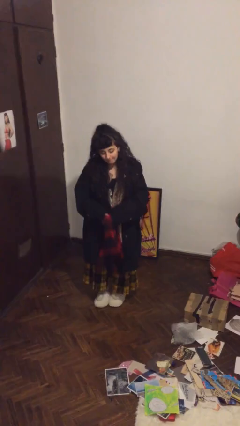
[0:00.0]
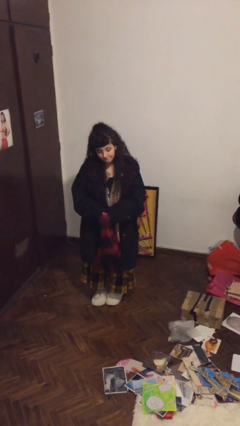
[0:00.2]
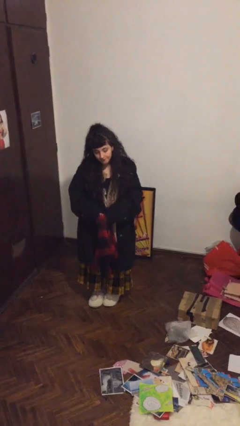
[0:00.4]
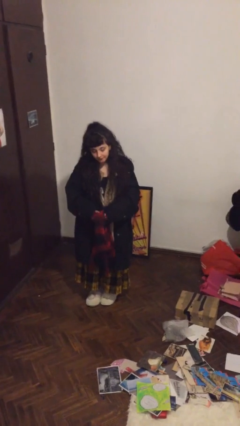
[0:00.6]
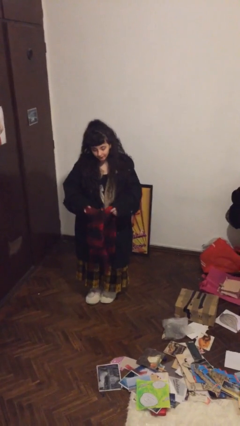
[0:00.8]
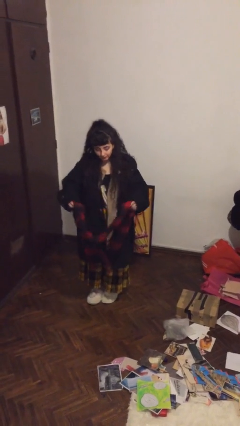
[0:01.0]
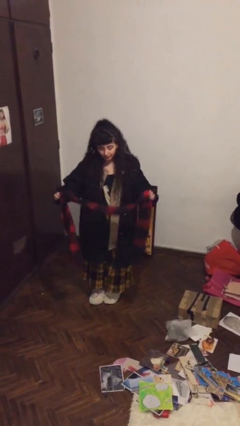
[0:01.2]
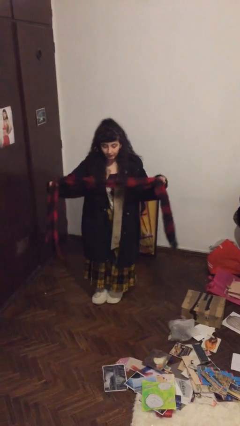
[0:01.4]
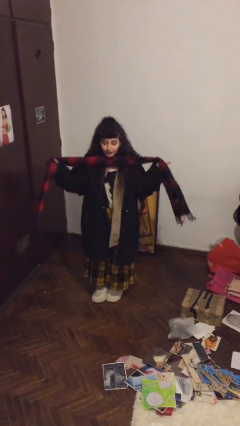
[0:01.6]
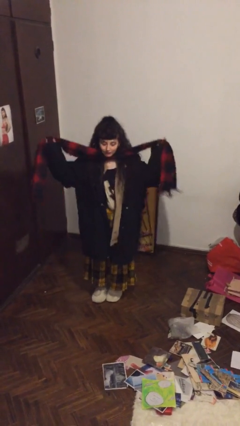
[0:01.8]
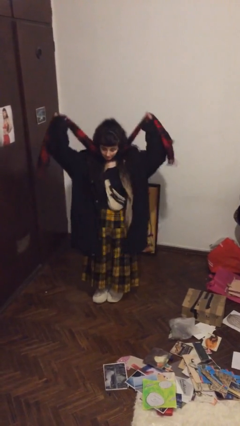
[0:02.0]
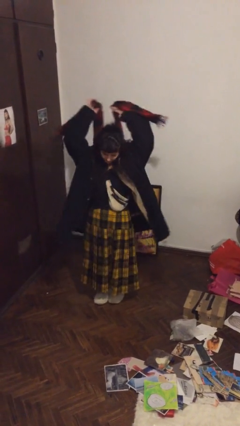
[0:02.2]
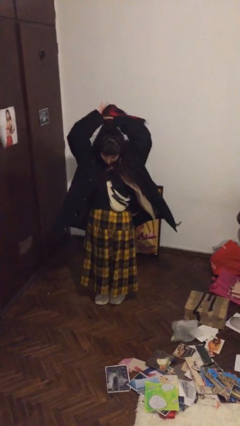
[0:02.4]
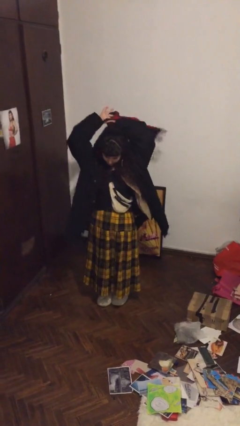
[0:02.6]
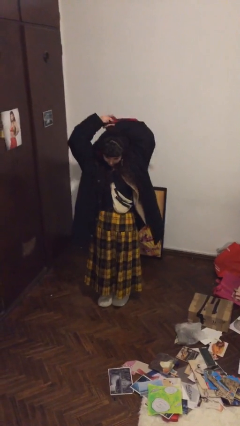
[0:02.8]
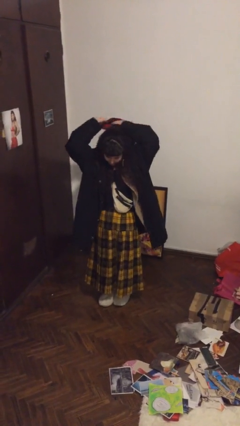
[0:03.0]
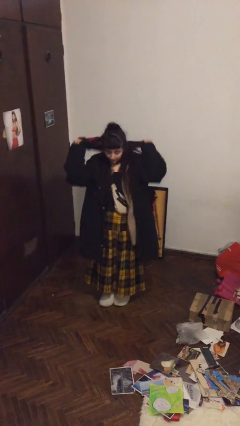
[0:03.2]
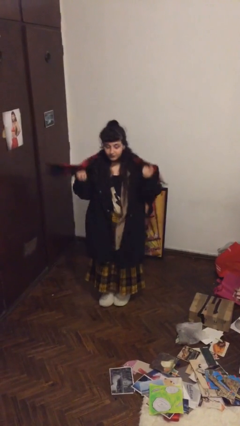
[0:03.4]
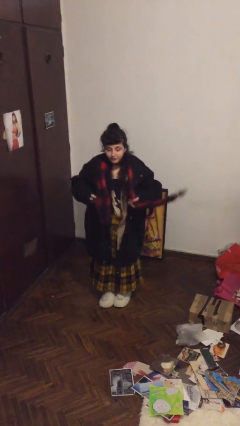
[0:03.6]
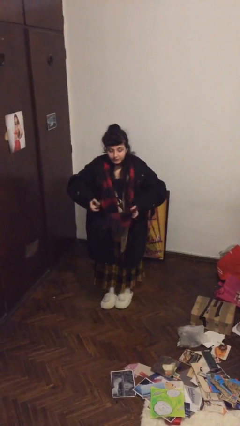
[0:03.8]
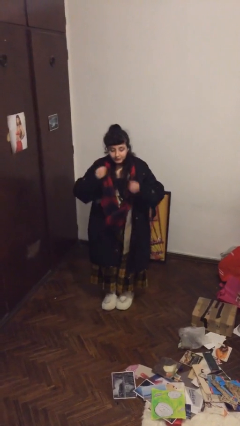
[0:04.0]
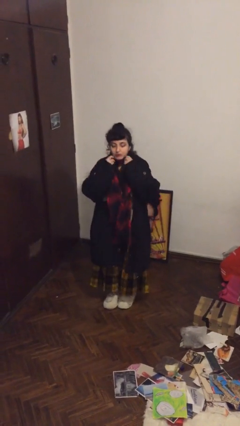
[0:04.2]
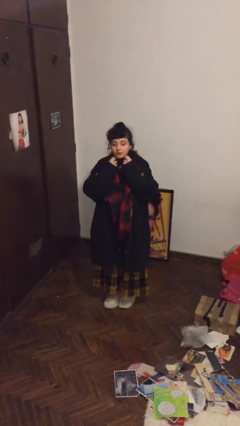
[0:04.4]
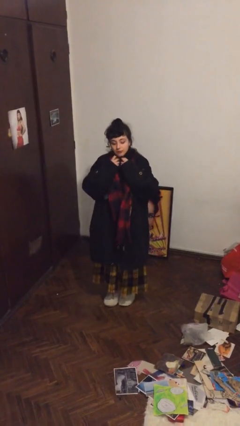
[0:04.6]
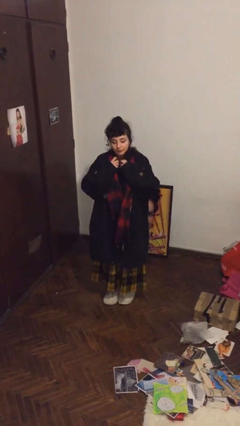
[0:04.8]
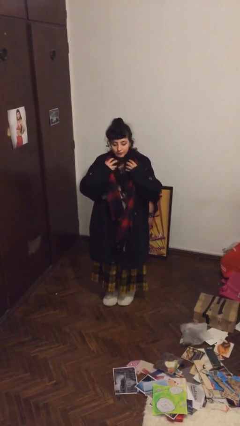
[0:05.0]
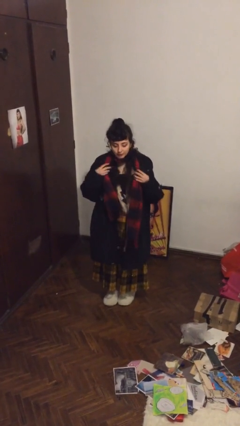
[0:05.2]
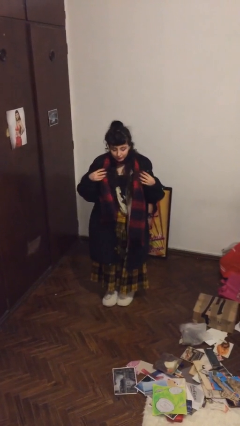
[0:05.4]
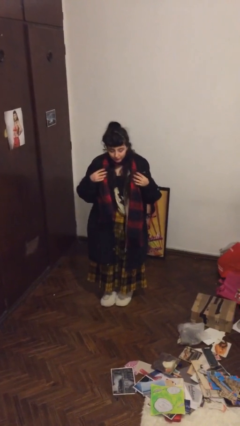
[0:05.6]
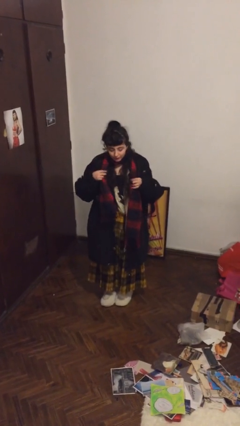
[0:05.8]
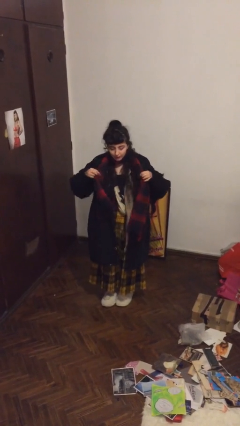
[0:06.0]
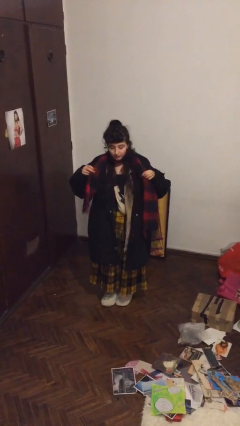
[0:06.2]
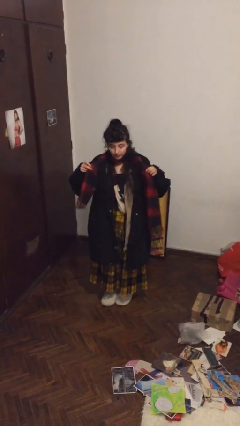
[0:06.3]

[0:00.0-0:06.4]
person puts on scarf

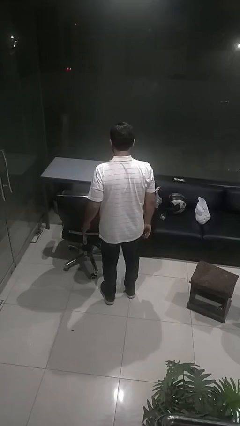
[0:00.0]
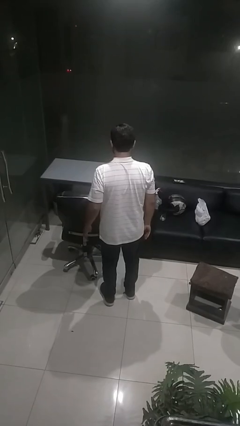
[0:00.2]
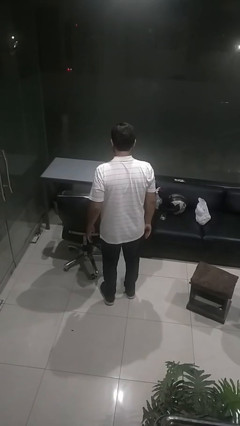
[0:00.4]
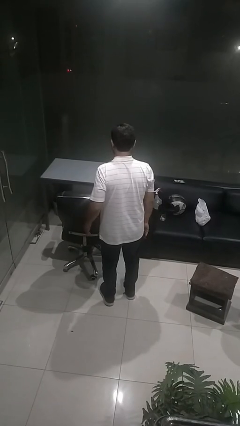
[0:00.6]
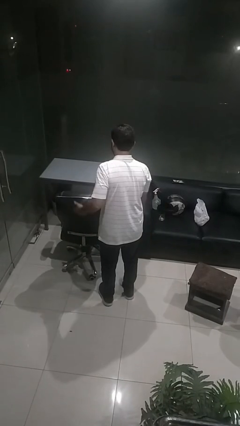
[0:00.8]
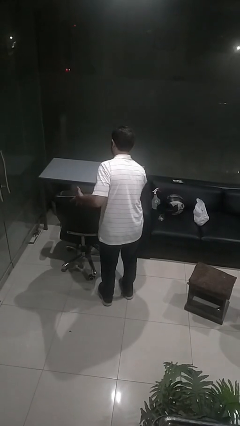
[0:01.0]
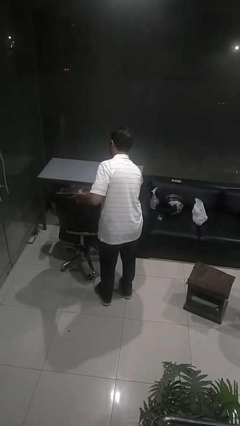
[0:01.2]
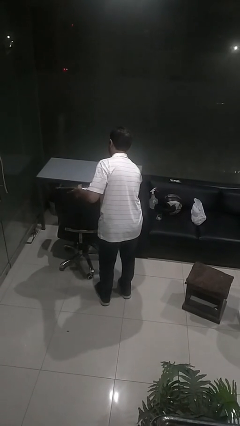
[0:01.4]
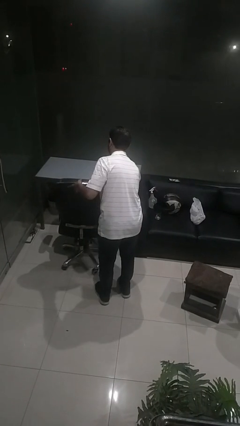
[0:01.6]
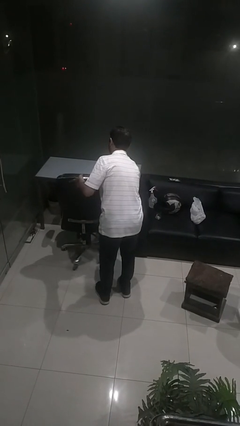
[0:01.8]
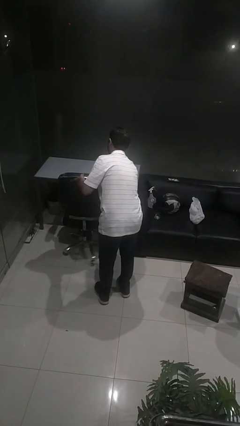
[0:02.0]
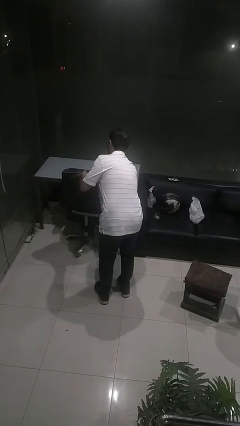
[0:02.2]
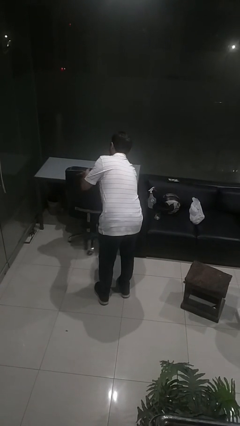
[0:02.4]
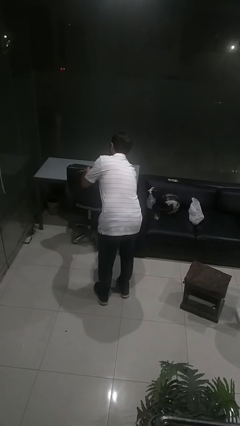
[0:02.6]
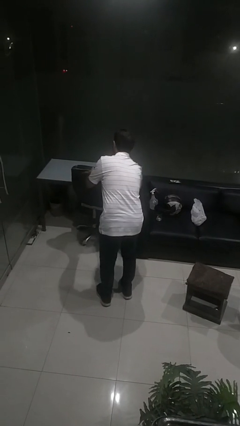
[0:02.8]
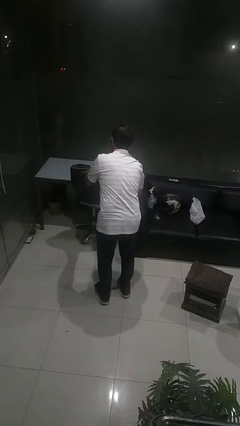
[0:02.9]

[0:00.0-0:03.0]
person pushes in chair

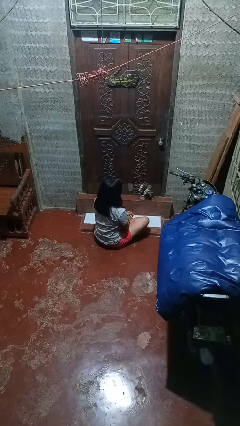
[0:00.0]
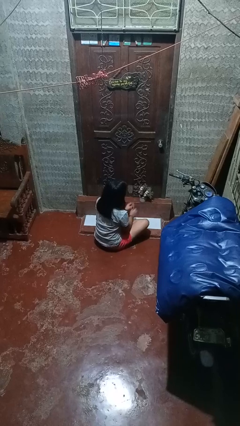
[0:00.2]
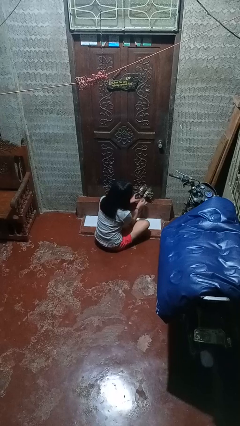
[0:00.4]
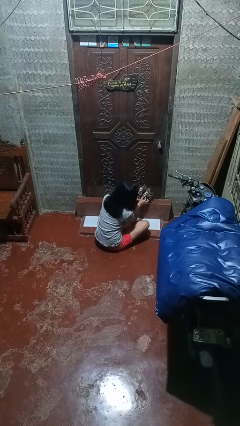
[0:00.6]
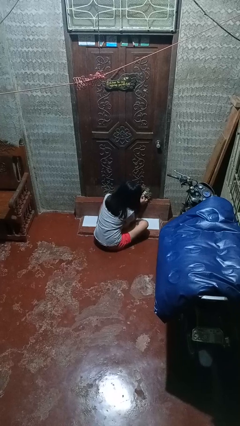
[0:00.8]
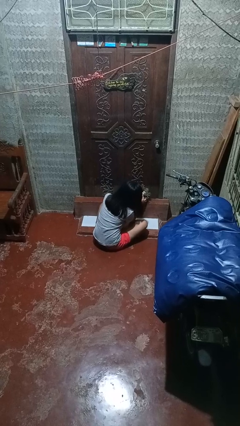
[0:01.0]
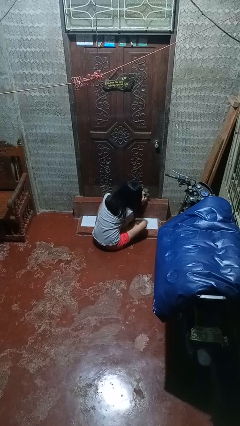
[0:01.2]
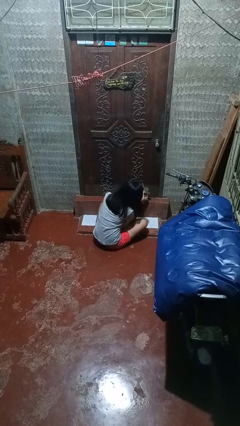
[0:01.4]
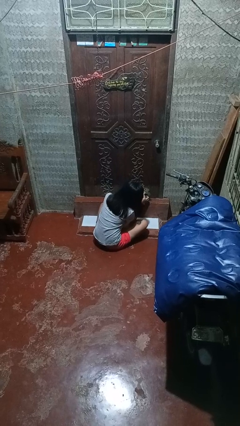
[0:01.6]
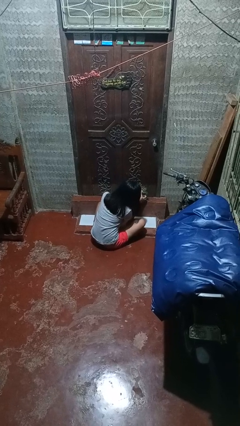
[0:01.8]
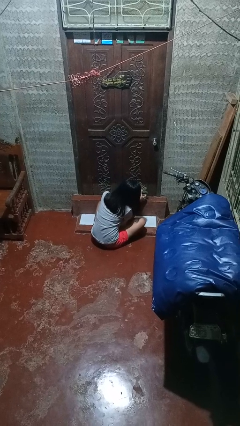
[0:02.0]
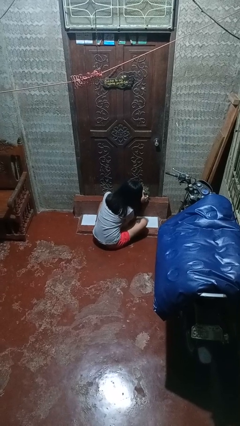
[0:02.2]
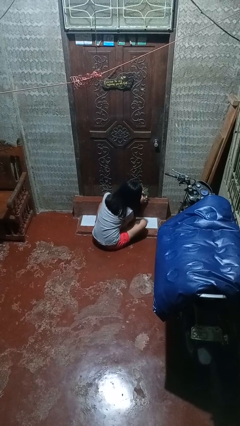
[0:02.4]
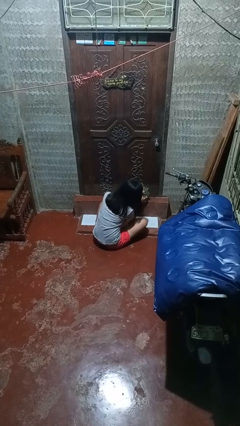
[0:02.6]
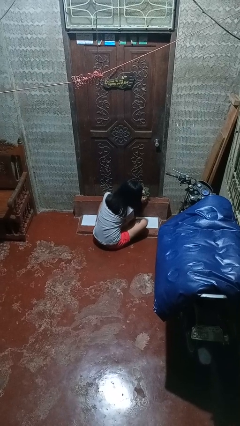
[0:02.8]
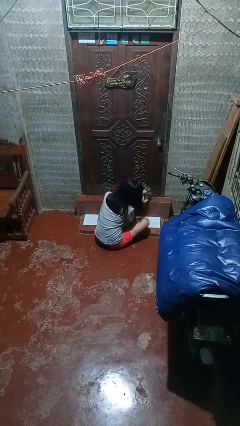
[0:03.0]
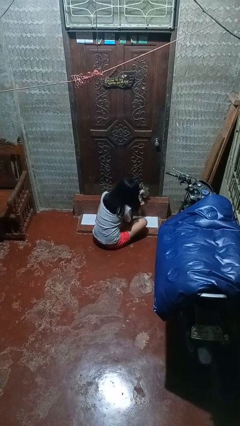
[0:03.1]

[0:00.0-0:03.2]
person arranges flowers in vase

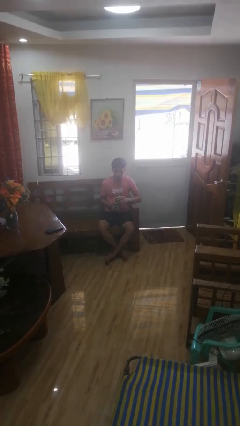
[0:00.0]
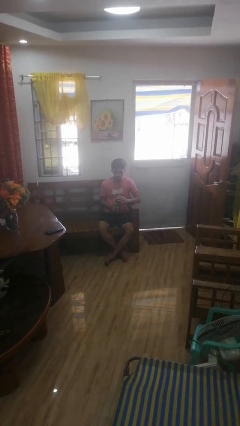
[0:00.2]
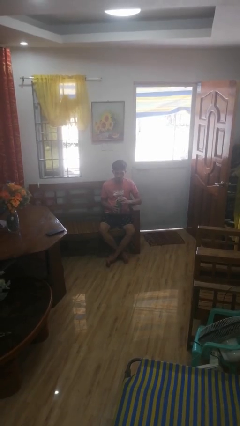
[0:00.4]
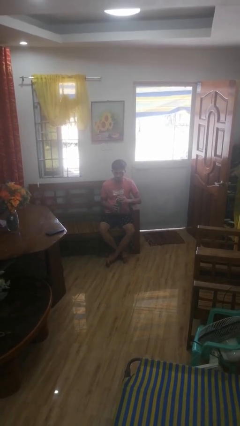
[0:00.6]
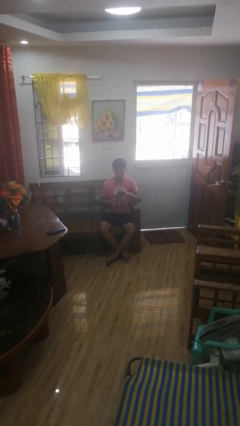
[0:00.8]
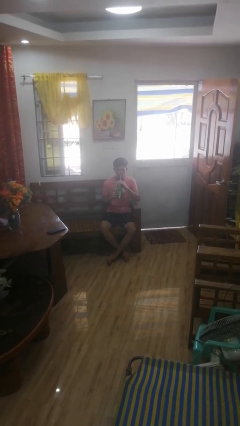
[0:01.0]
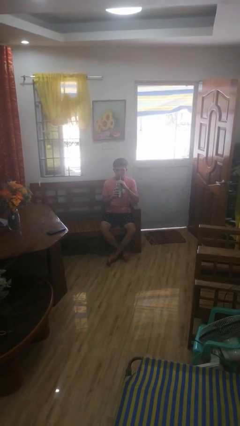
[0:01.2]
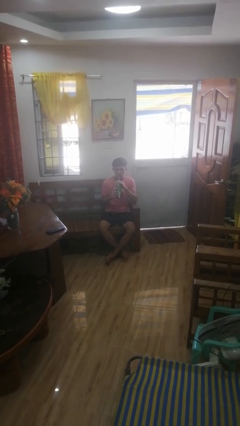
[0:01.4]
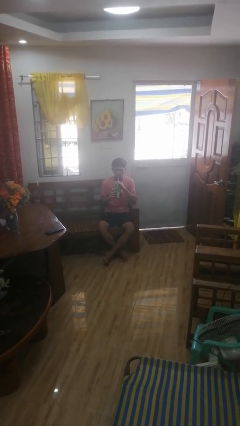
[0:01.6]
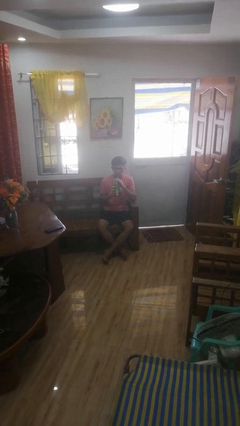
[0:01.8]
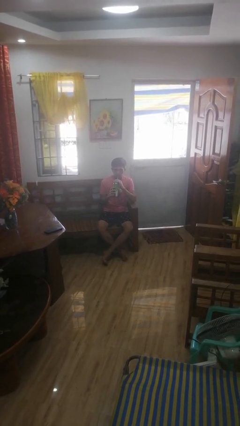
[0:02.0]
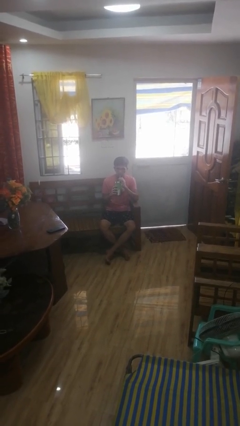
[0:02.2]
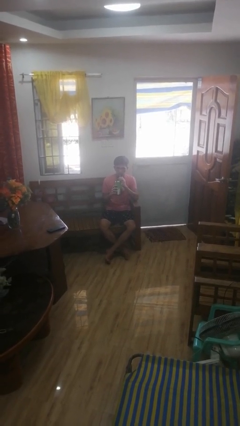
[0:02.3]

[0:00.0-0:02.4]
person drinks from straw

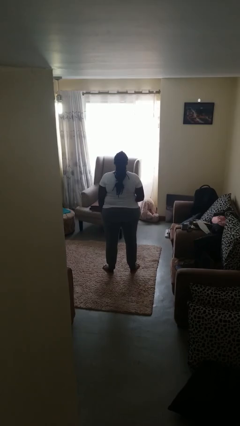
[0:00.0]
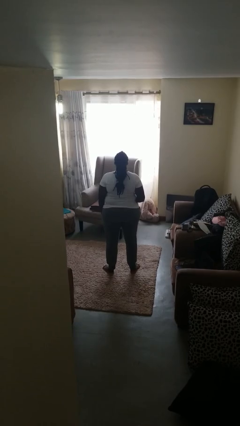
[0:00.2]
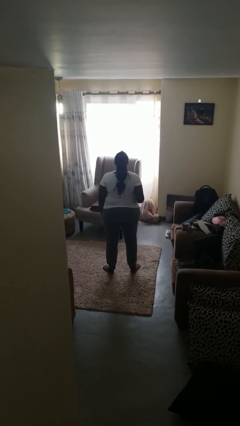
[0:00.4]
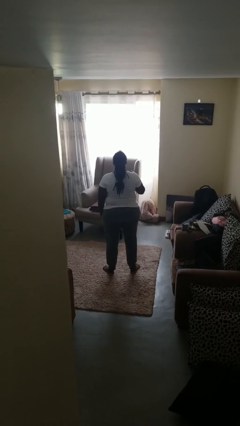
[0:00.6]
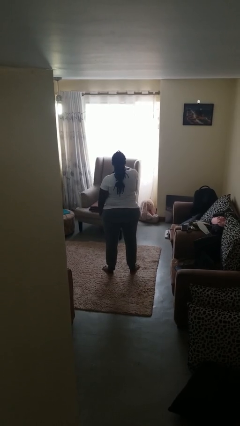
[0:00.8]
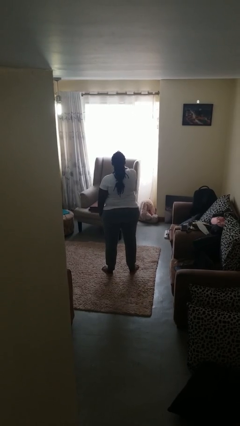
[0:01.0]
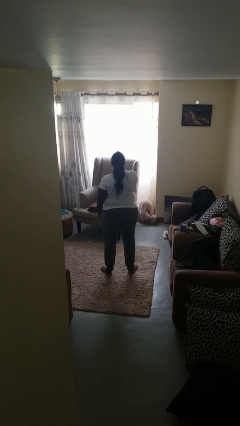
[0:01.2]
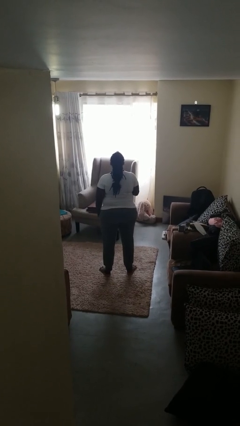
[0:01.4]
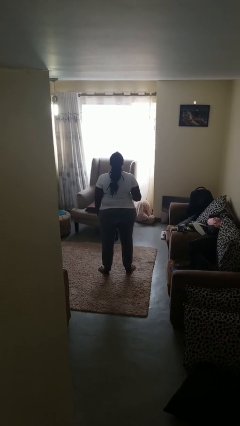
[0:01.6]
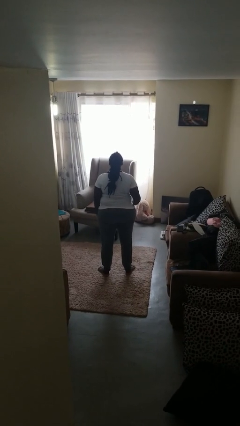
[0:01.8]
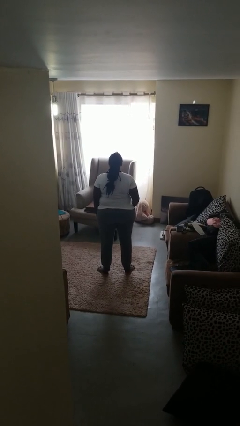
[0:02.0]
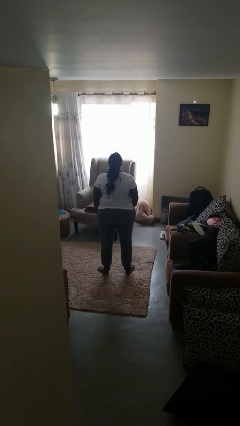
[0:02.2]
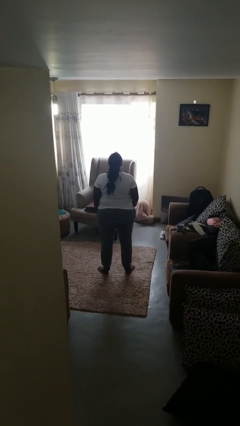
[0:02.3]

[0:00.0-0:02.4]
person punches
